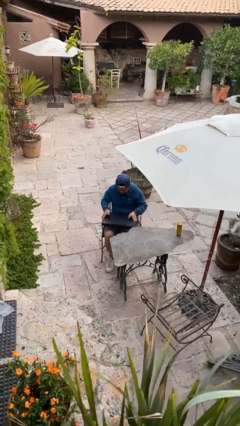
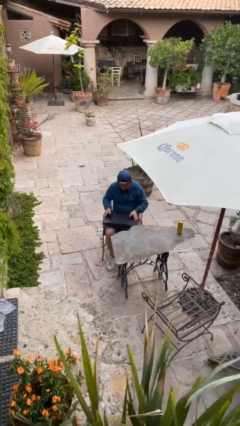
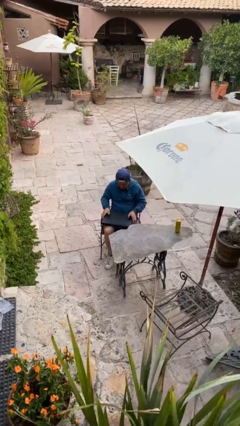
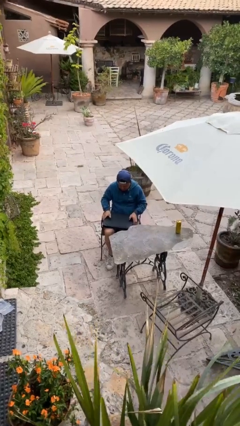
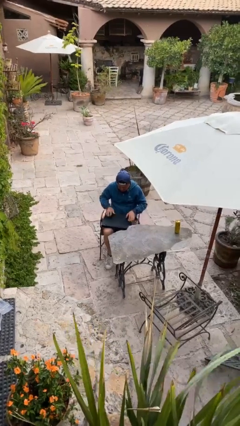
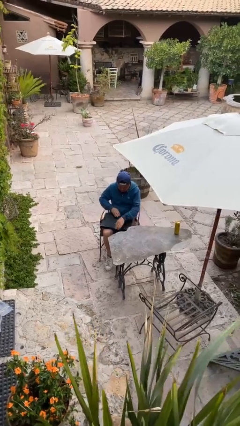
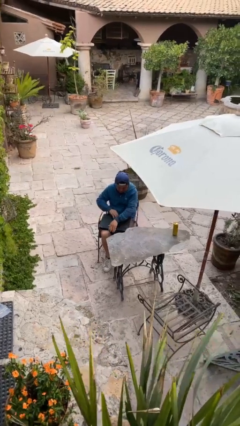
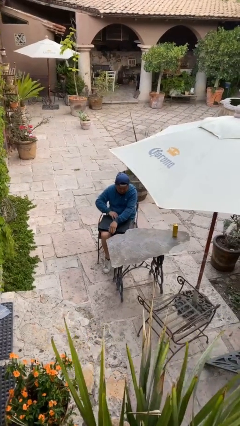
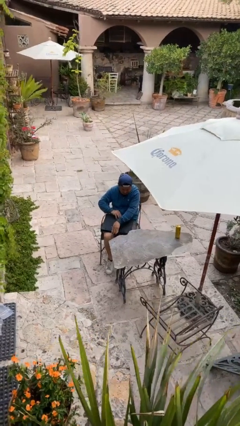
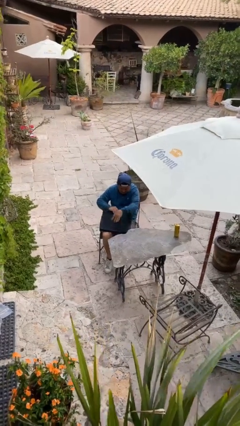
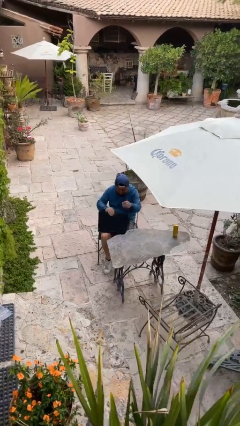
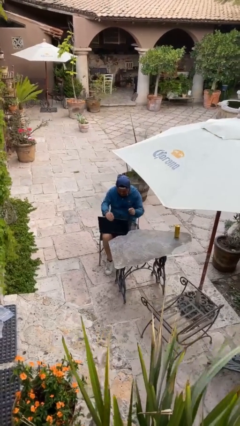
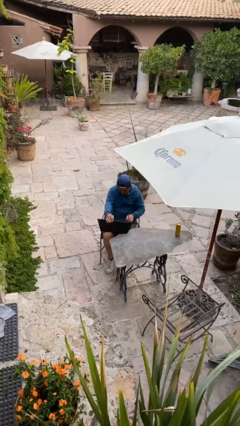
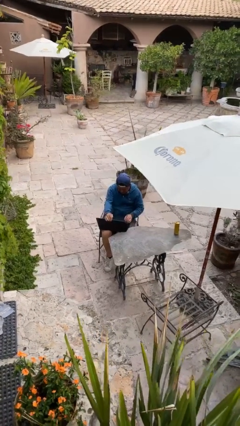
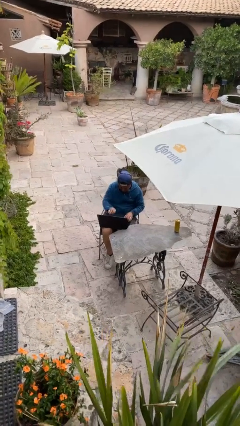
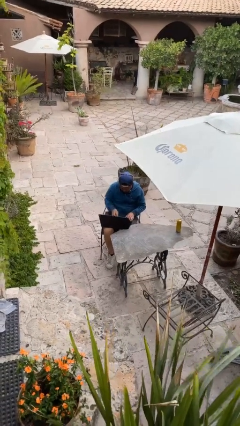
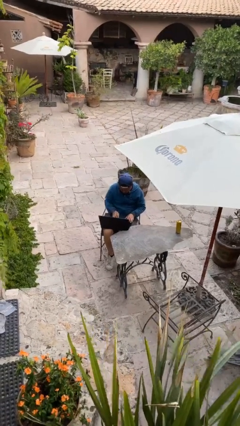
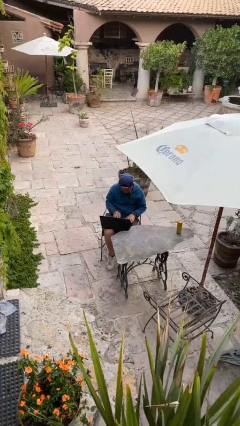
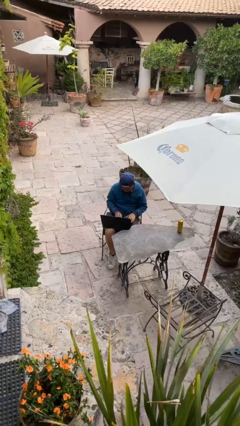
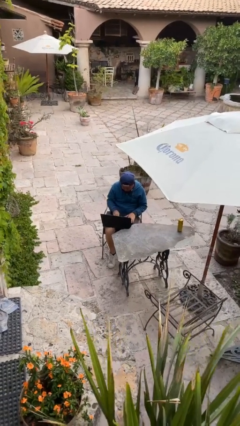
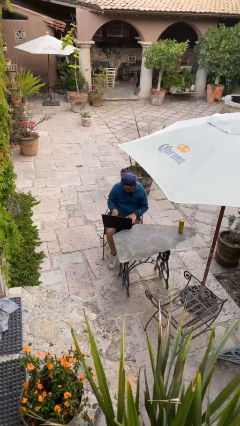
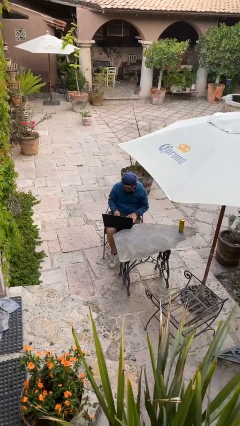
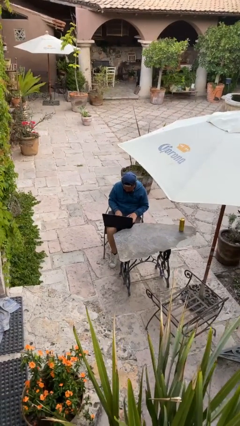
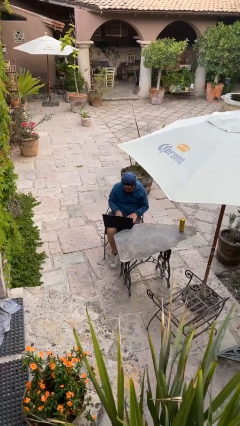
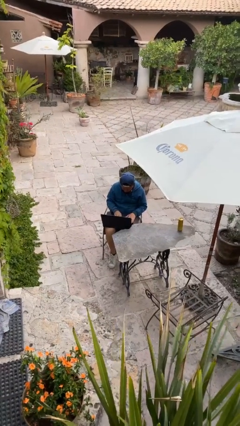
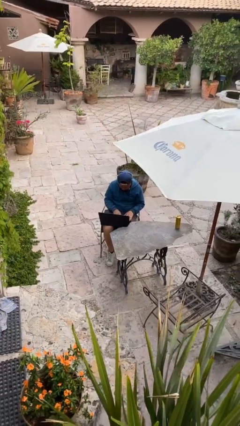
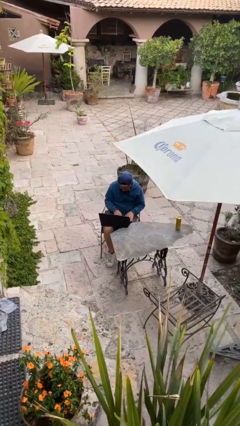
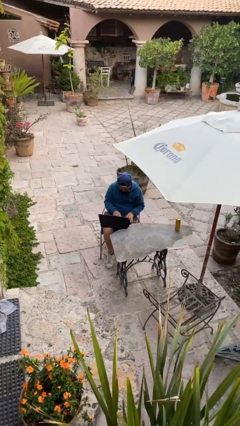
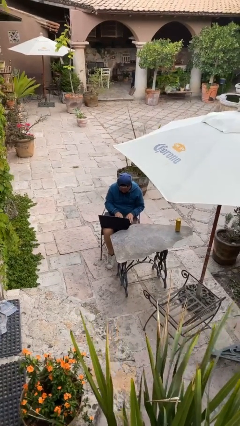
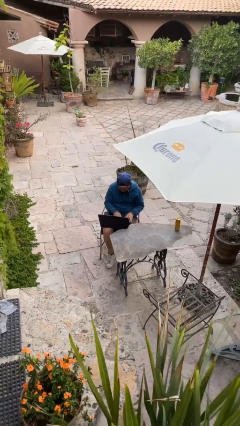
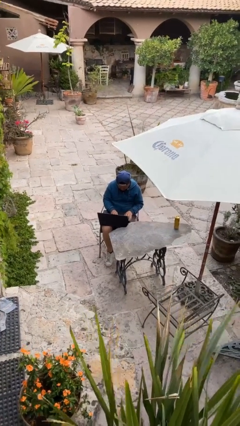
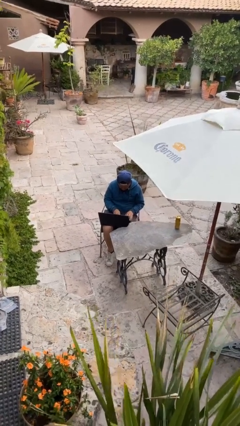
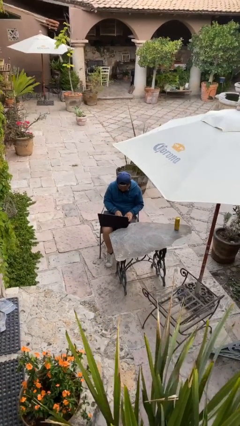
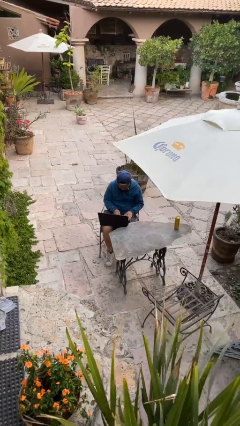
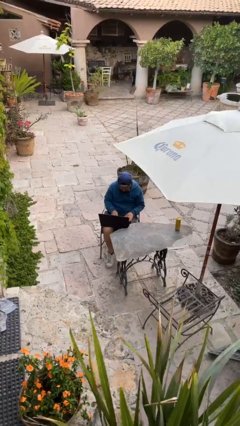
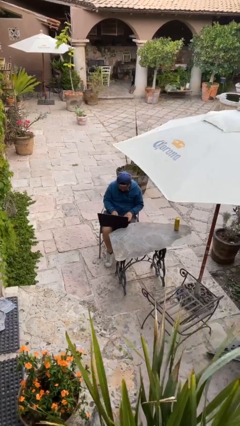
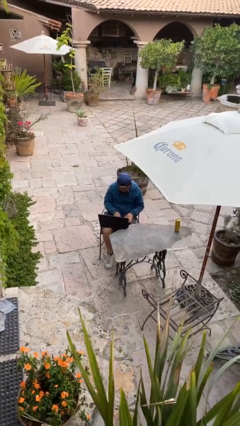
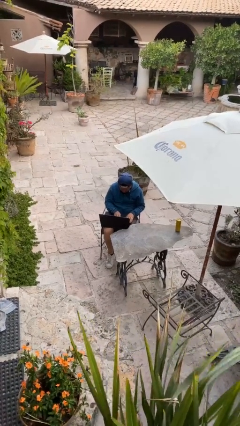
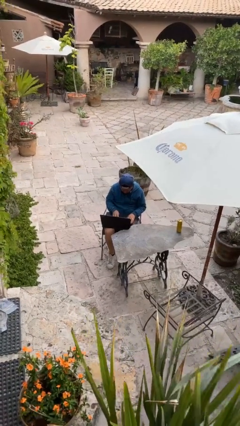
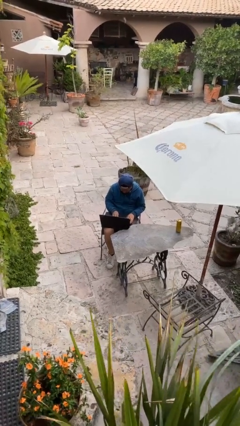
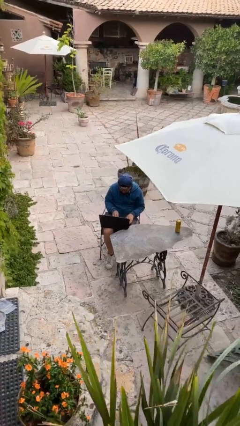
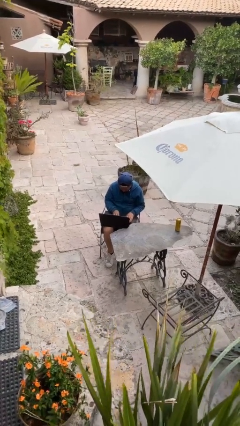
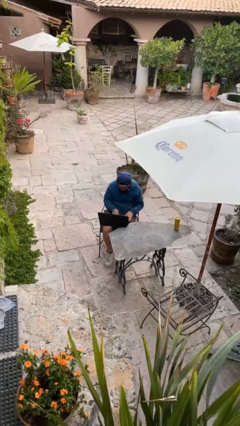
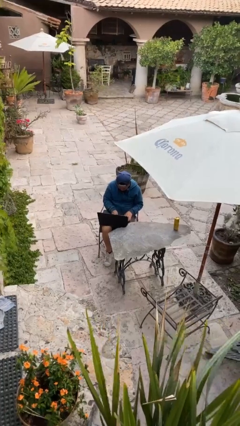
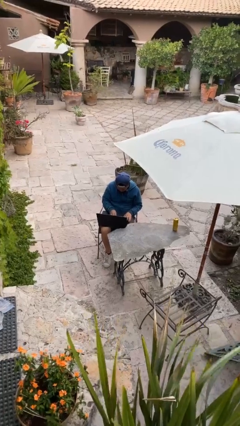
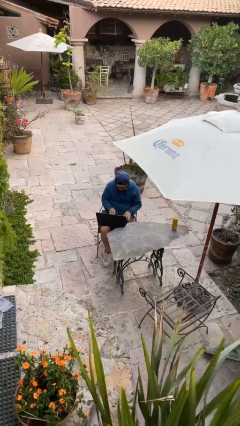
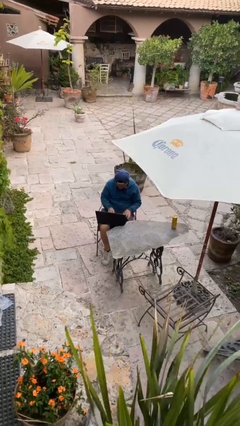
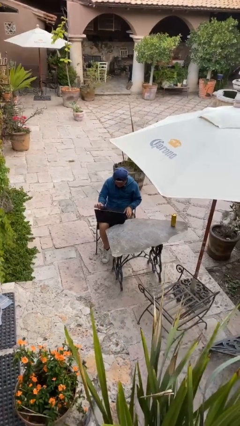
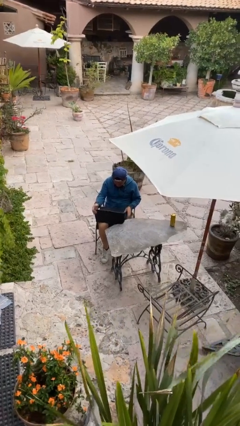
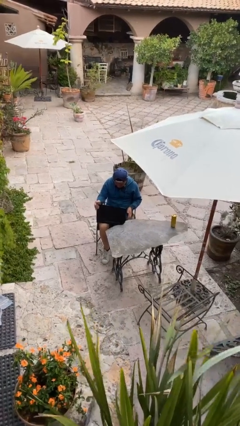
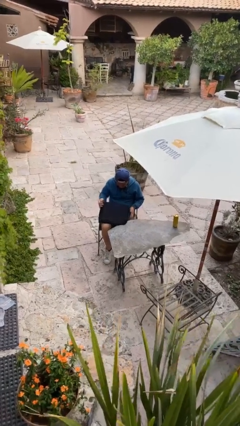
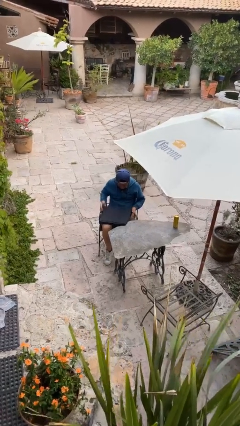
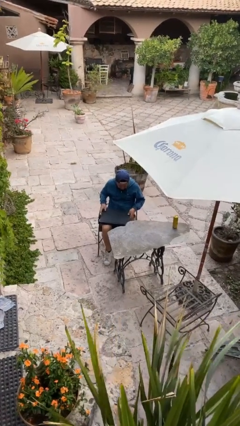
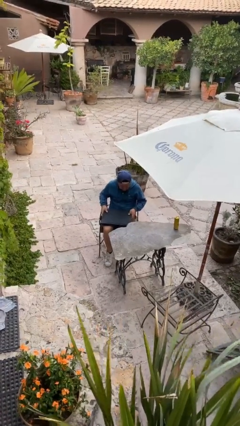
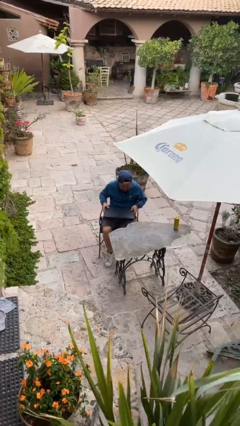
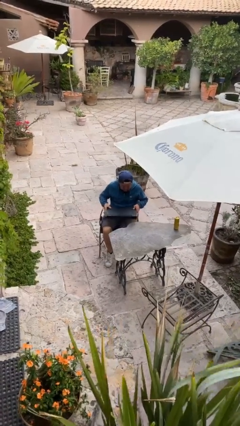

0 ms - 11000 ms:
person interacts with laptop

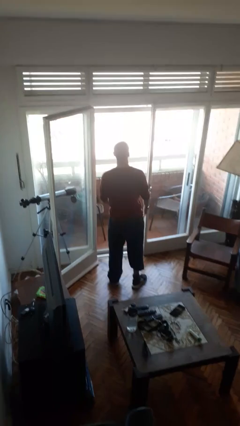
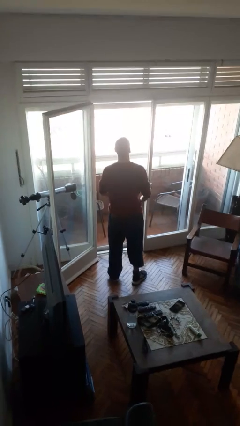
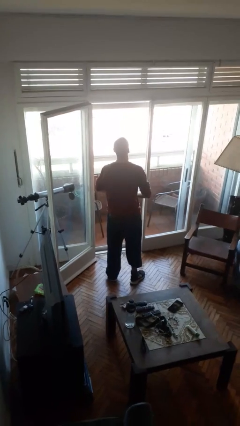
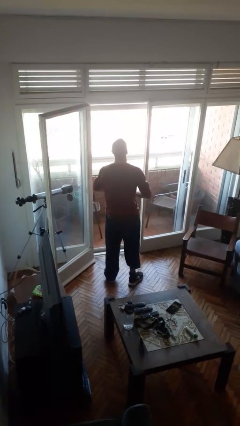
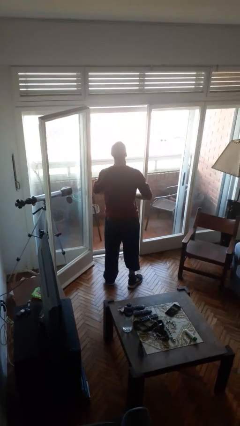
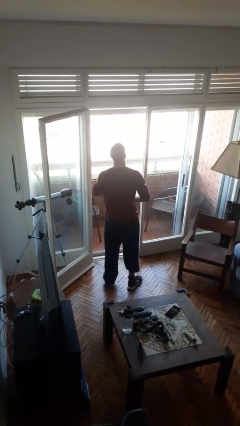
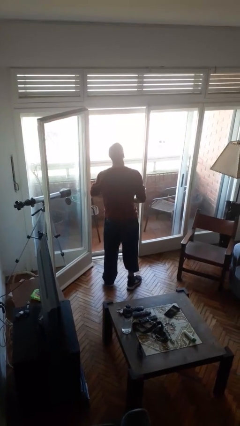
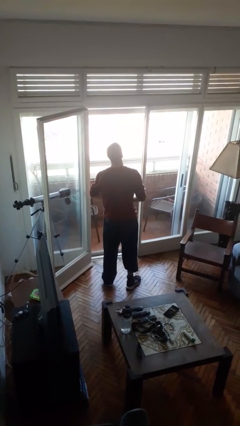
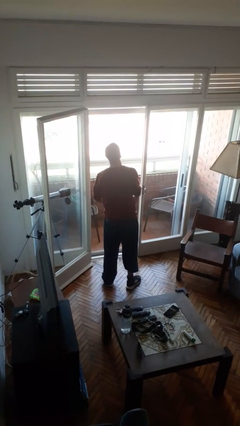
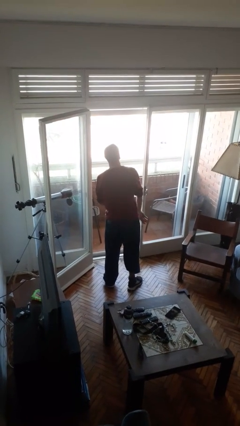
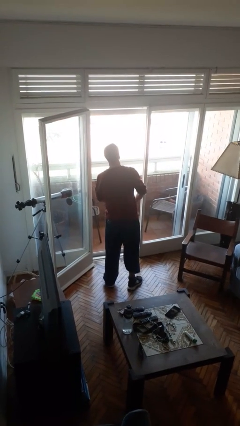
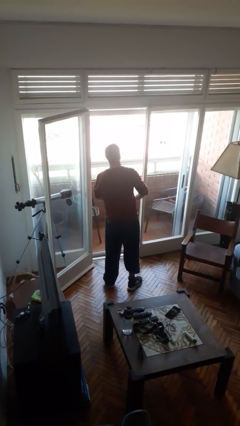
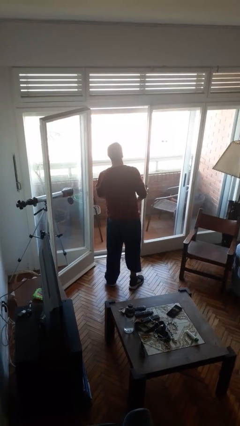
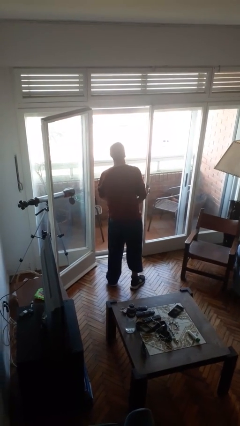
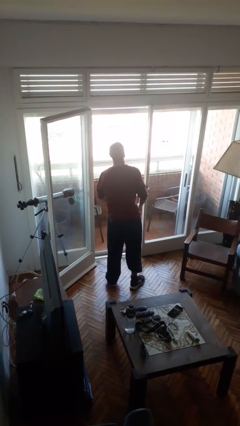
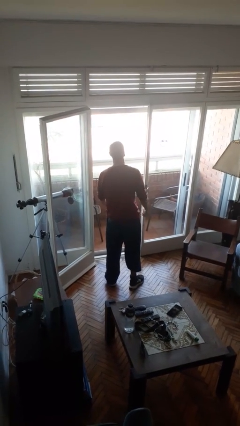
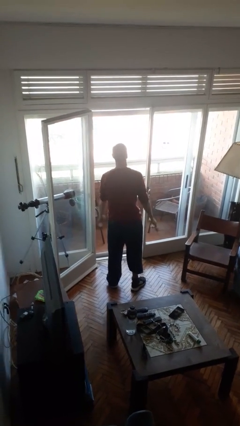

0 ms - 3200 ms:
person takes off wristwatch

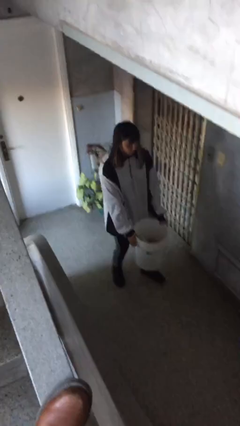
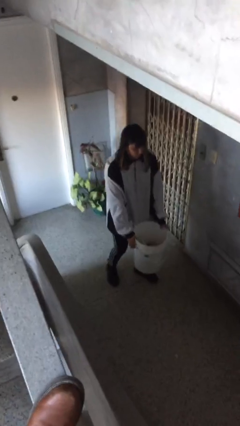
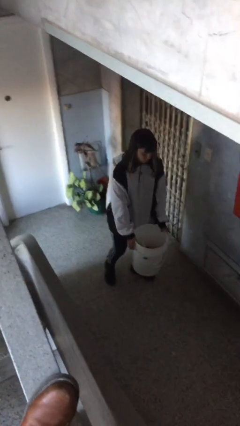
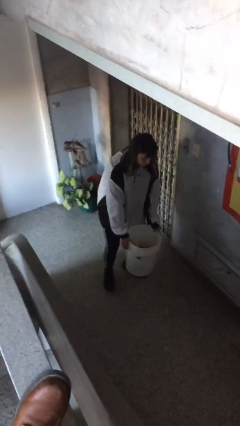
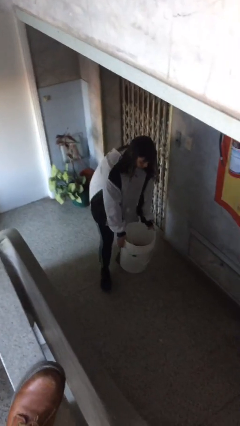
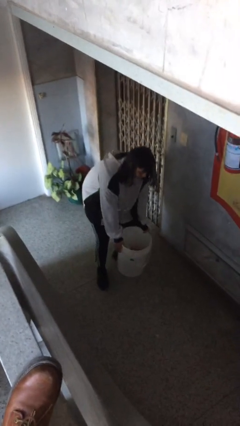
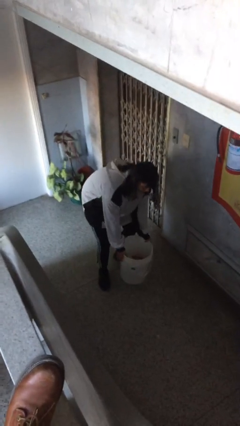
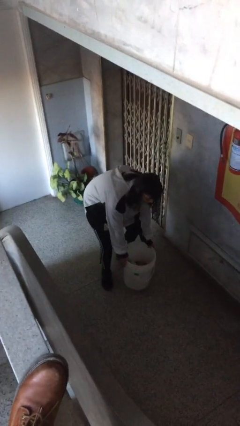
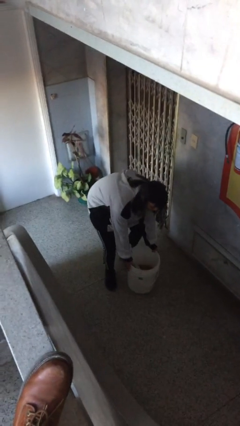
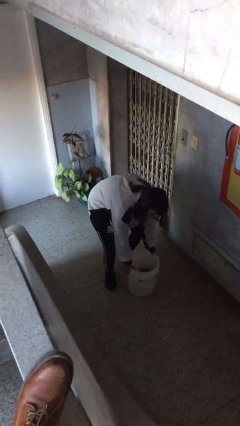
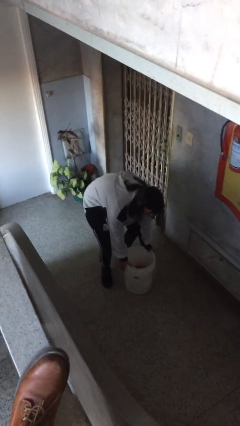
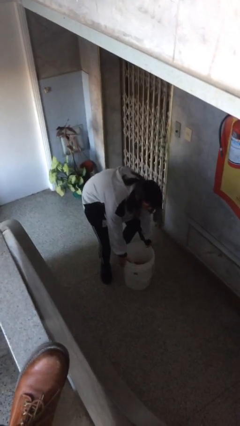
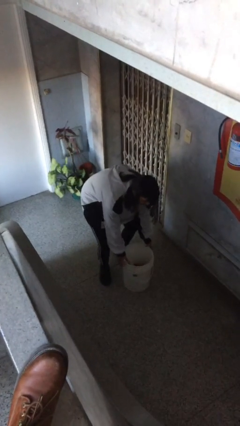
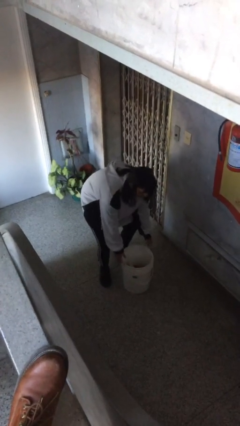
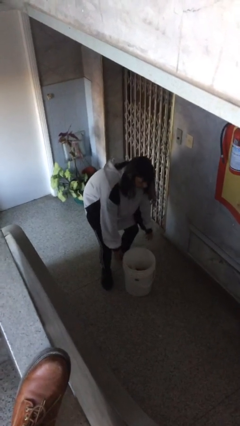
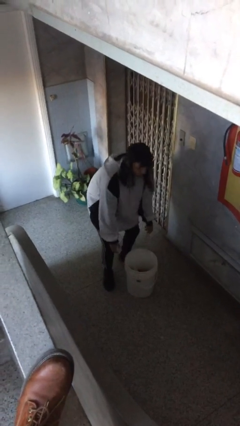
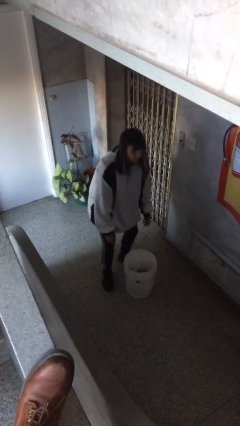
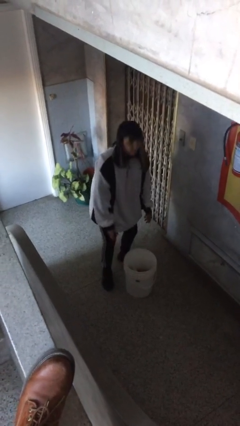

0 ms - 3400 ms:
person puts down object on floor
